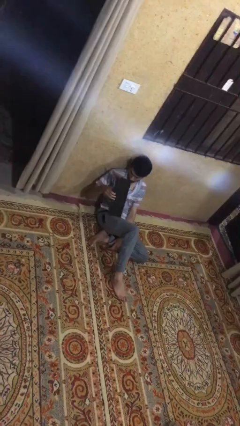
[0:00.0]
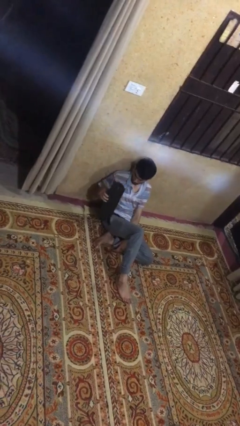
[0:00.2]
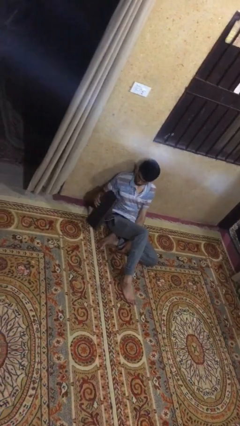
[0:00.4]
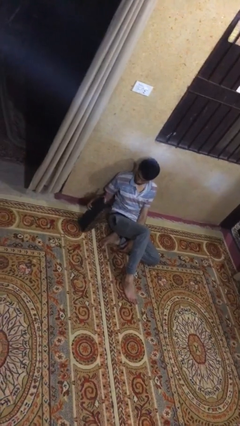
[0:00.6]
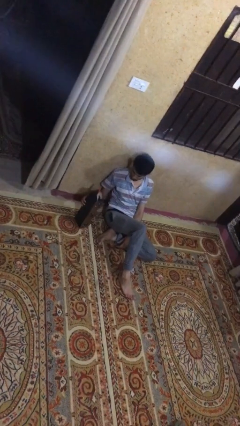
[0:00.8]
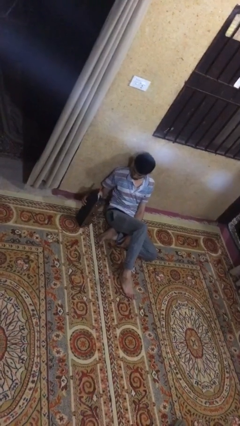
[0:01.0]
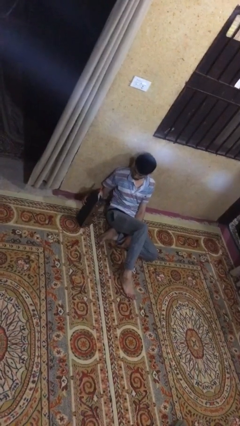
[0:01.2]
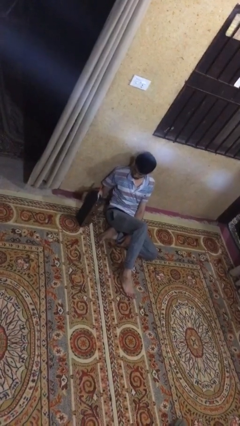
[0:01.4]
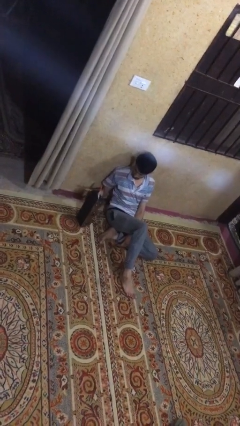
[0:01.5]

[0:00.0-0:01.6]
person puts down object on floor

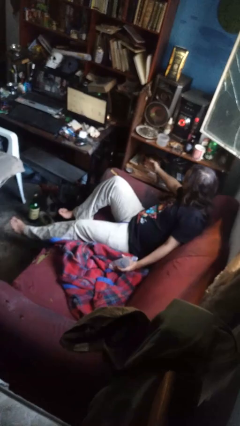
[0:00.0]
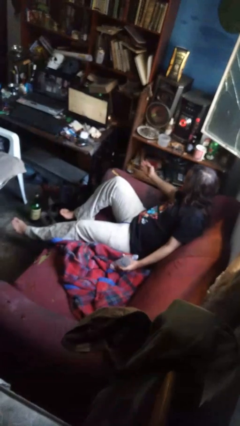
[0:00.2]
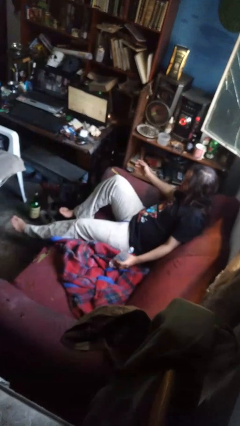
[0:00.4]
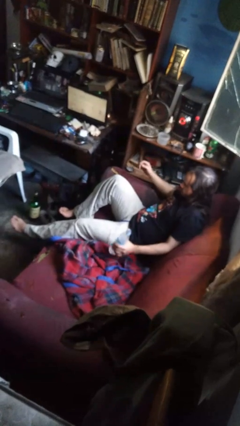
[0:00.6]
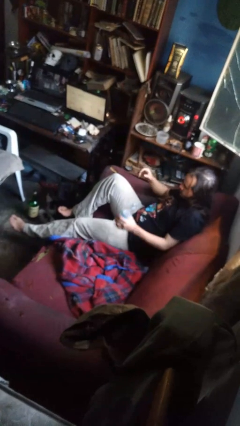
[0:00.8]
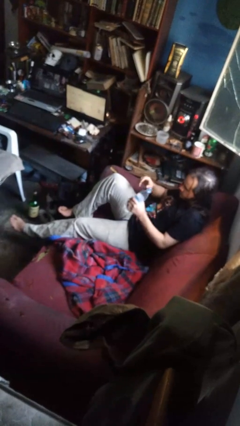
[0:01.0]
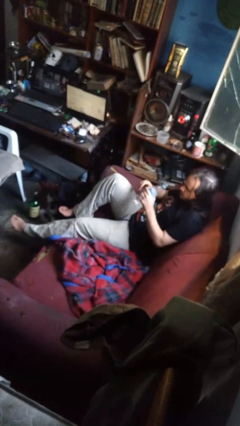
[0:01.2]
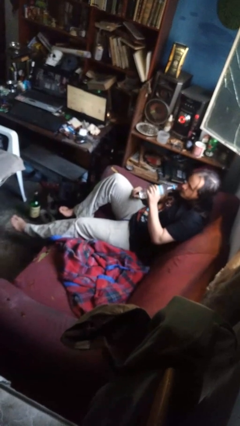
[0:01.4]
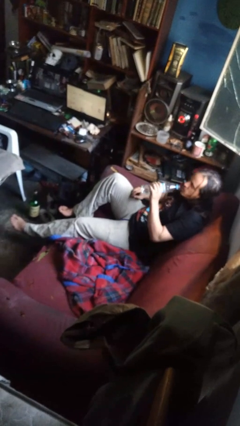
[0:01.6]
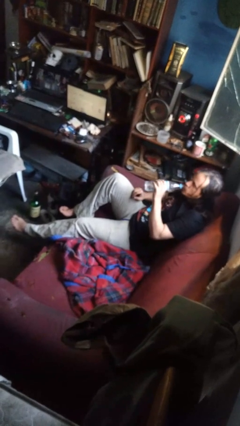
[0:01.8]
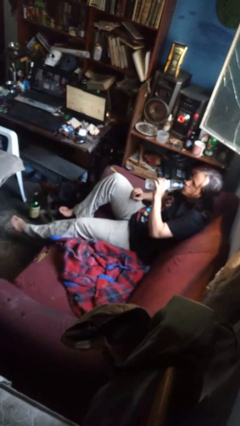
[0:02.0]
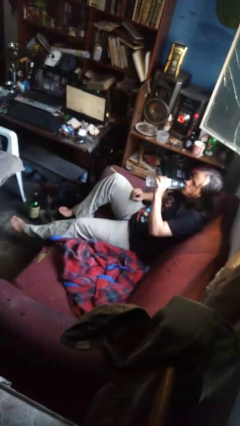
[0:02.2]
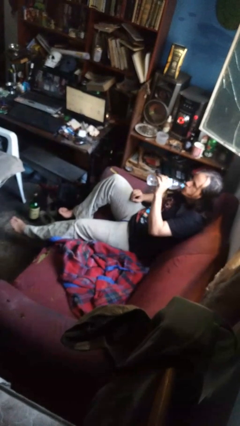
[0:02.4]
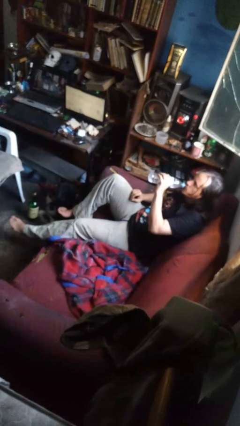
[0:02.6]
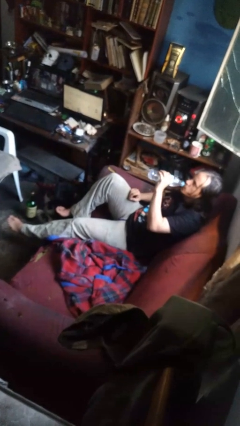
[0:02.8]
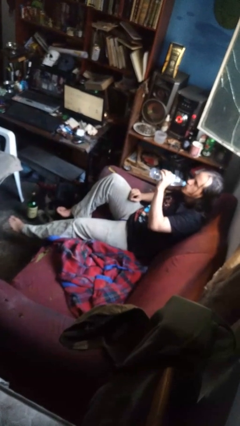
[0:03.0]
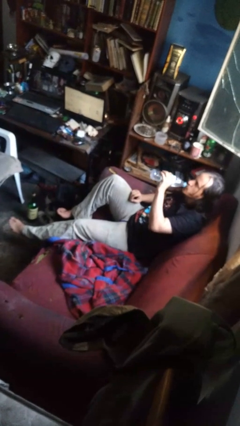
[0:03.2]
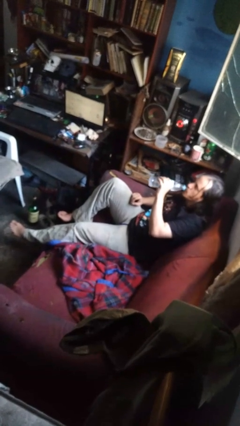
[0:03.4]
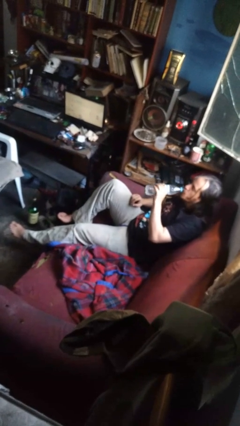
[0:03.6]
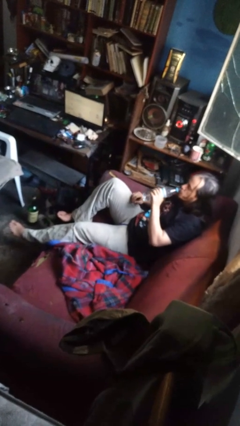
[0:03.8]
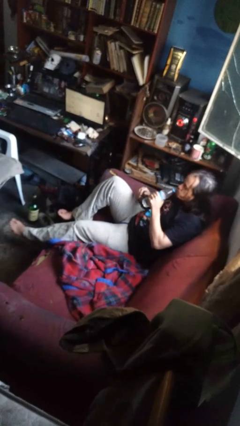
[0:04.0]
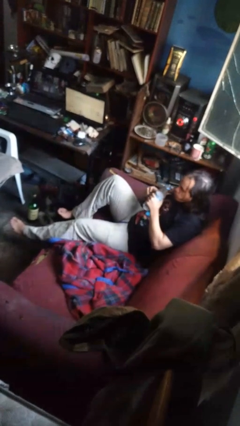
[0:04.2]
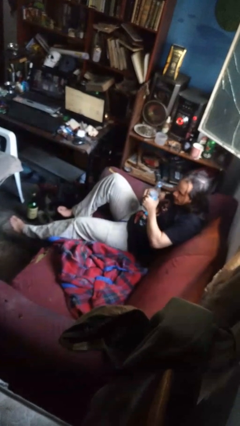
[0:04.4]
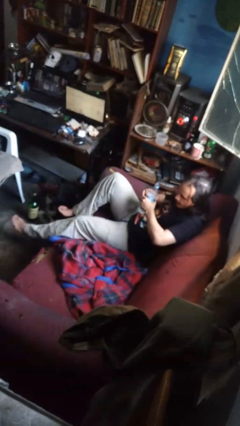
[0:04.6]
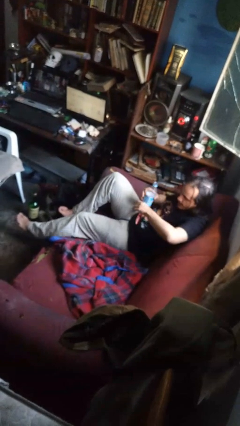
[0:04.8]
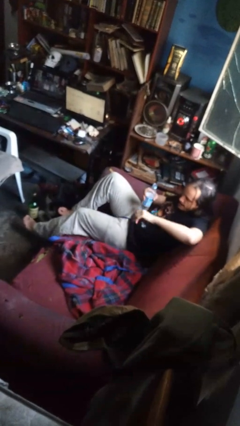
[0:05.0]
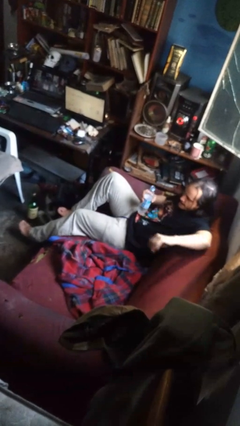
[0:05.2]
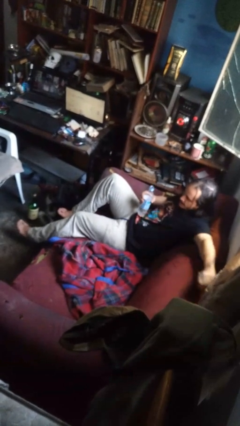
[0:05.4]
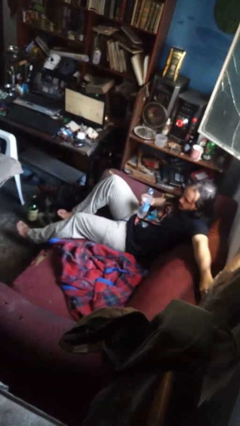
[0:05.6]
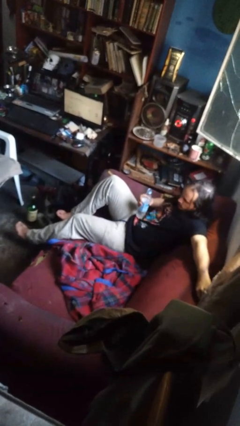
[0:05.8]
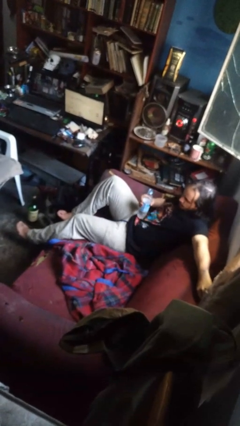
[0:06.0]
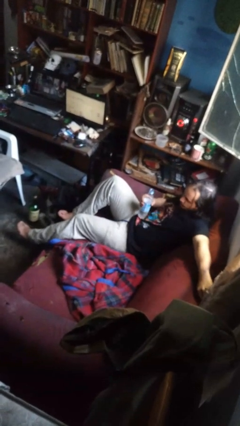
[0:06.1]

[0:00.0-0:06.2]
person drinks from bottle

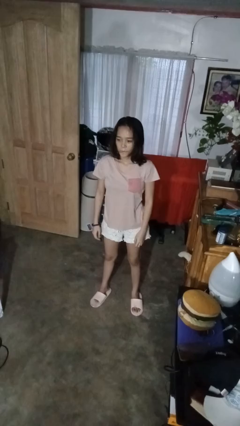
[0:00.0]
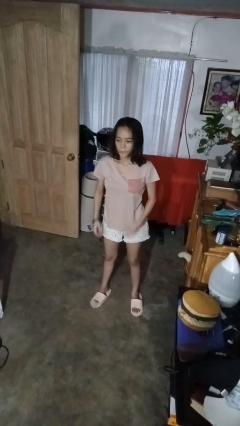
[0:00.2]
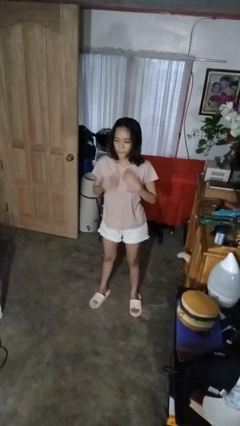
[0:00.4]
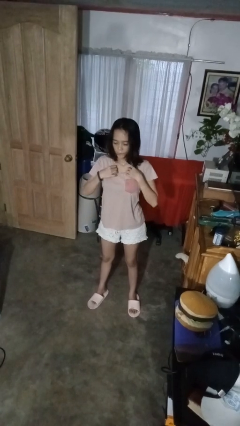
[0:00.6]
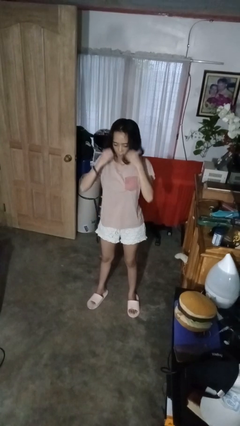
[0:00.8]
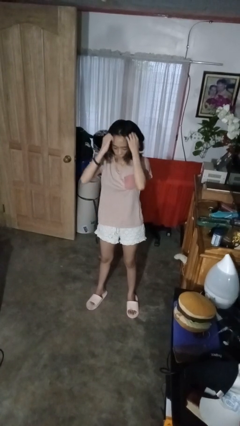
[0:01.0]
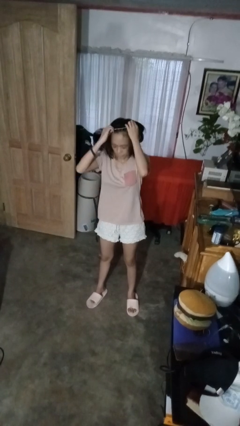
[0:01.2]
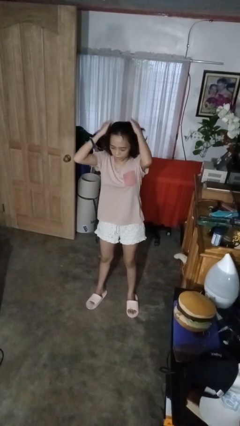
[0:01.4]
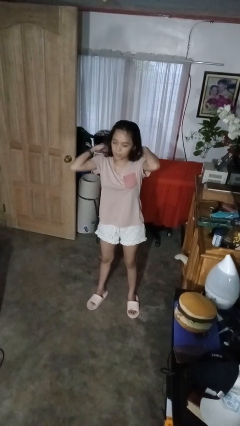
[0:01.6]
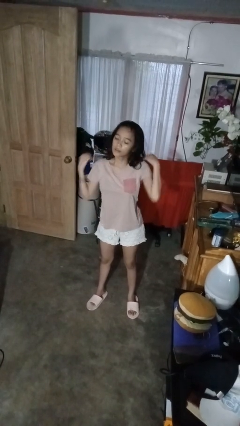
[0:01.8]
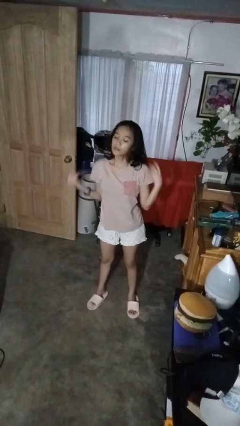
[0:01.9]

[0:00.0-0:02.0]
person takes off necklace

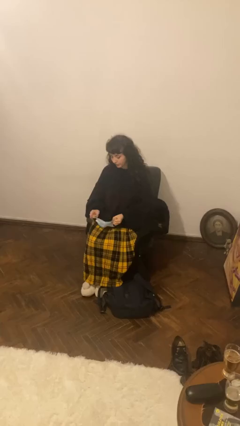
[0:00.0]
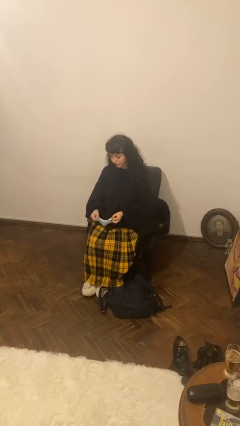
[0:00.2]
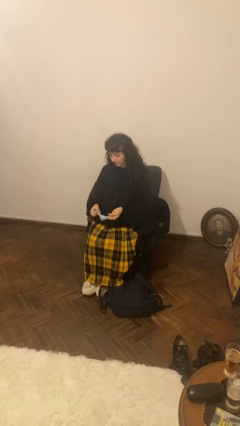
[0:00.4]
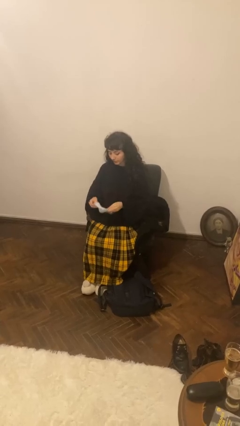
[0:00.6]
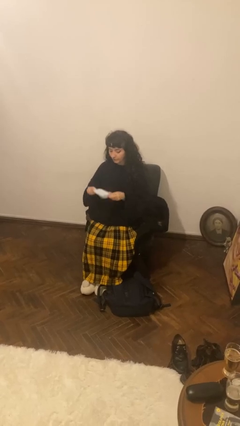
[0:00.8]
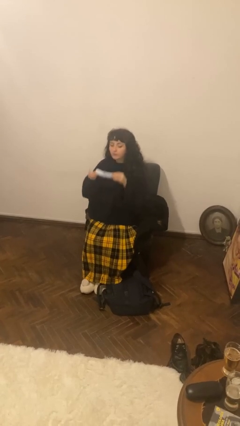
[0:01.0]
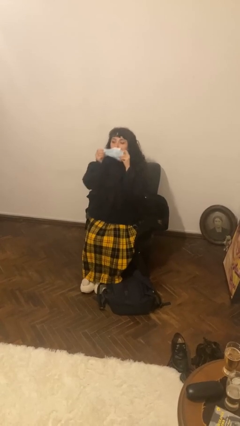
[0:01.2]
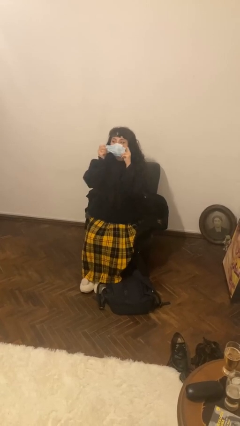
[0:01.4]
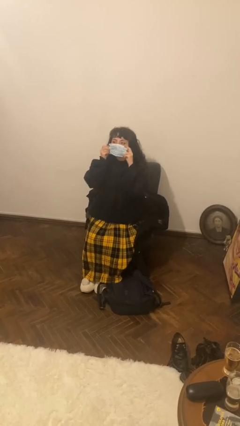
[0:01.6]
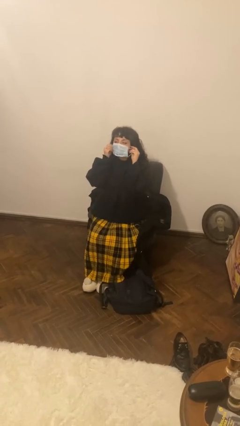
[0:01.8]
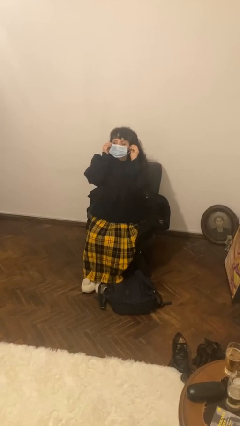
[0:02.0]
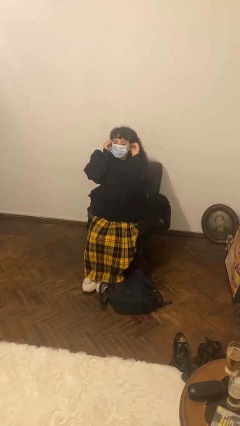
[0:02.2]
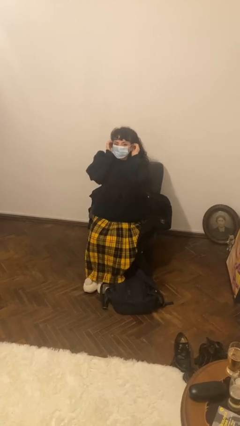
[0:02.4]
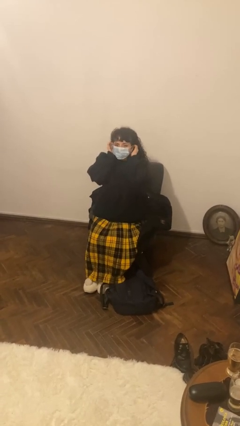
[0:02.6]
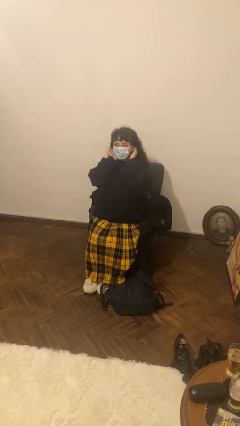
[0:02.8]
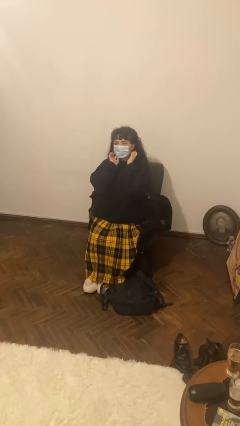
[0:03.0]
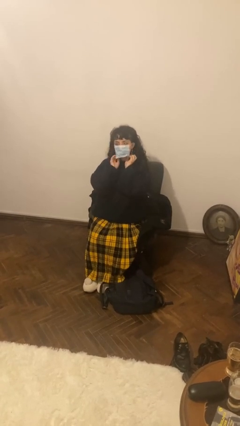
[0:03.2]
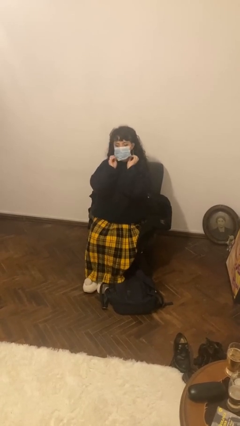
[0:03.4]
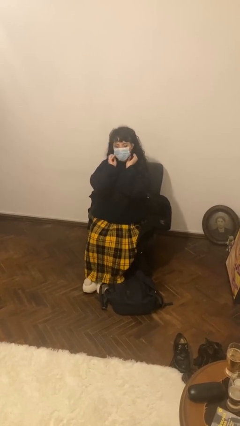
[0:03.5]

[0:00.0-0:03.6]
person puts on facemask

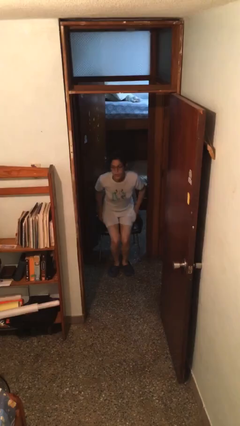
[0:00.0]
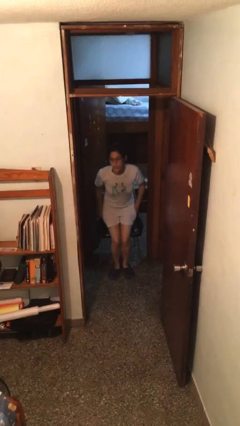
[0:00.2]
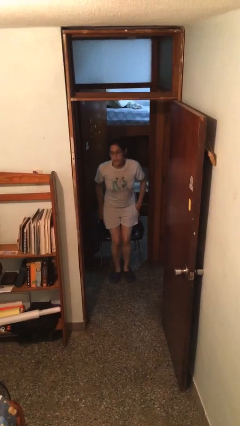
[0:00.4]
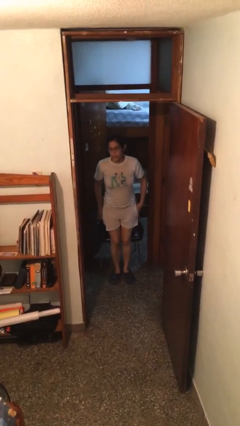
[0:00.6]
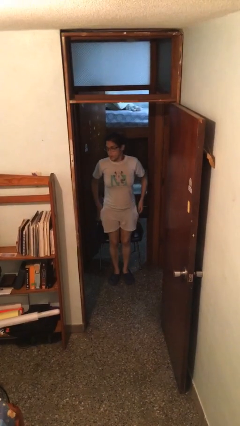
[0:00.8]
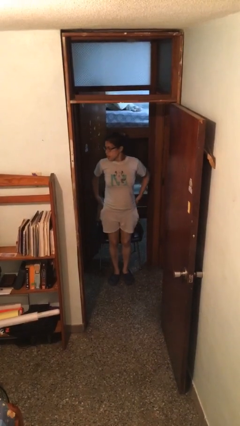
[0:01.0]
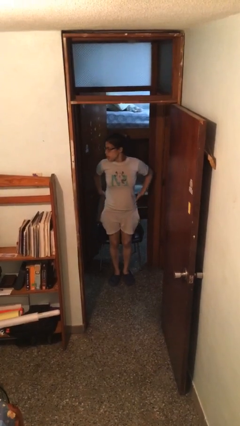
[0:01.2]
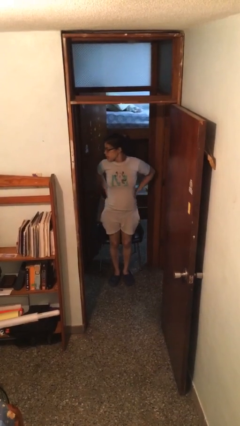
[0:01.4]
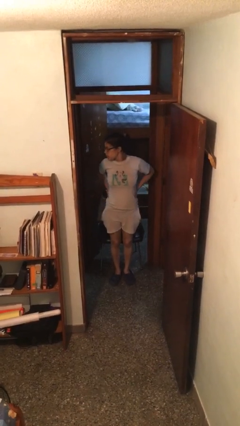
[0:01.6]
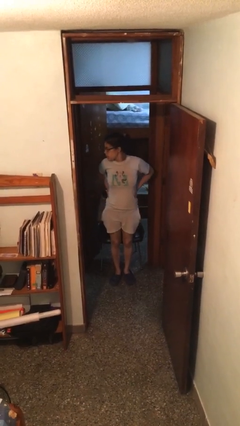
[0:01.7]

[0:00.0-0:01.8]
person stands up

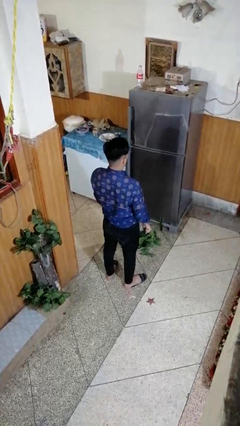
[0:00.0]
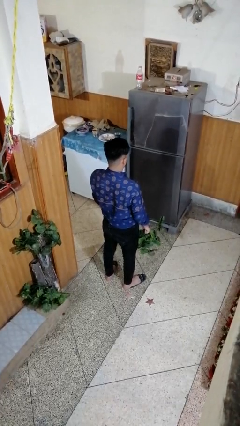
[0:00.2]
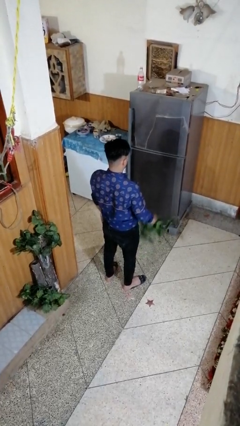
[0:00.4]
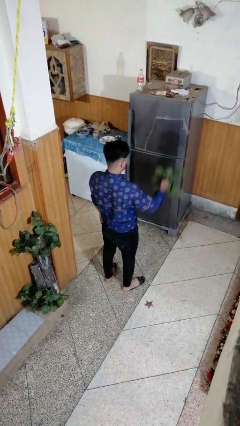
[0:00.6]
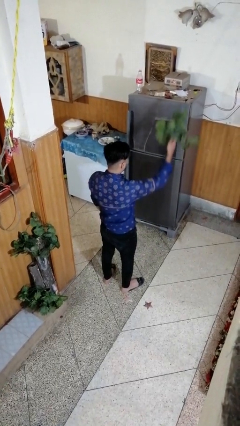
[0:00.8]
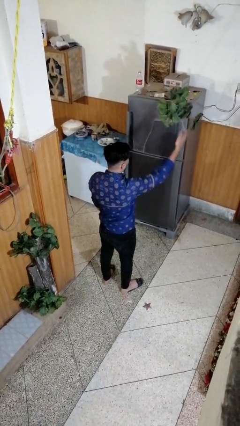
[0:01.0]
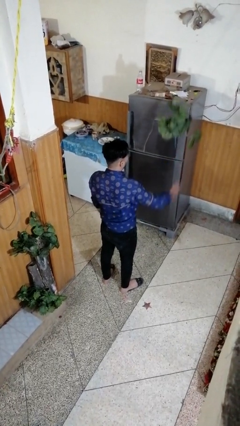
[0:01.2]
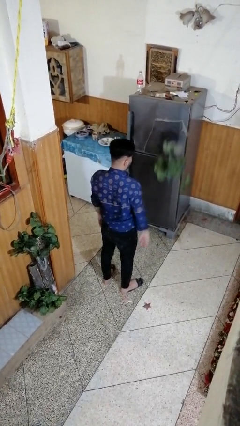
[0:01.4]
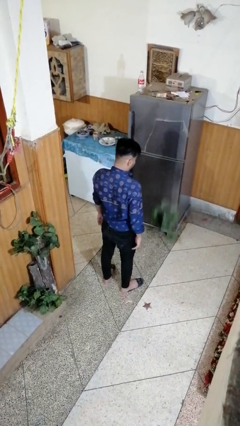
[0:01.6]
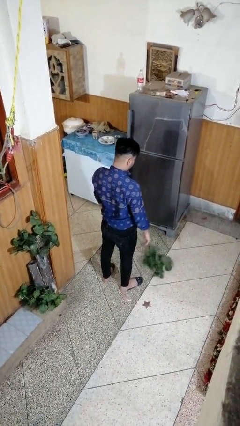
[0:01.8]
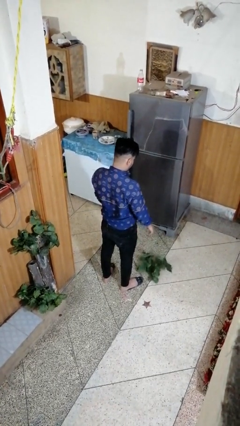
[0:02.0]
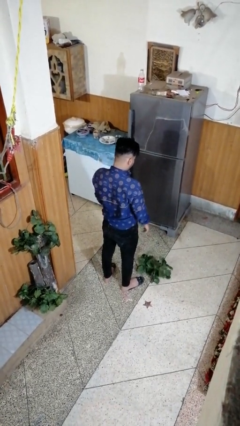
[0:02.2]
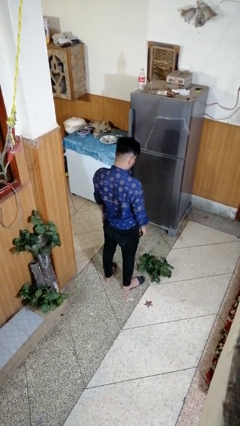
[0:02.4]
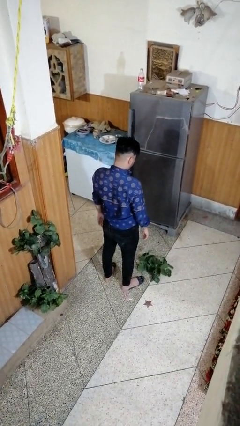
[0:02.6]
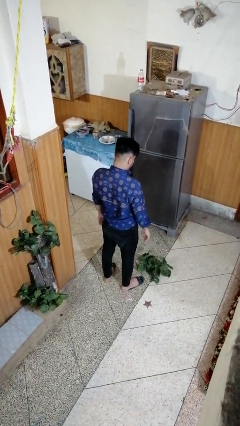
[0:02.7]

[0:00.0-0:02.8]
person throws object into air
